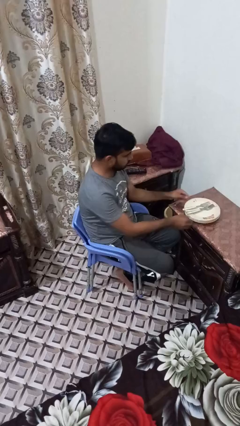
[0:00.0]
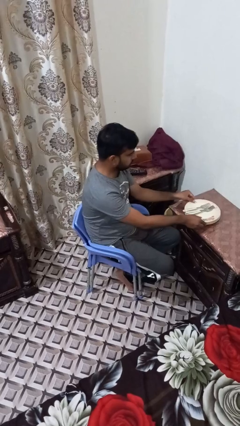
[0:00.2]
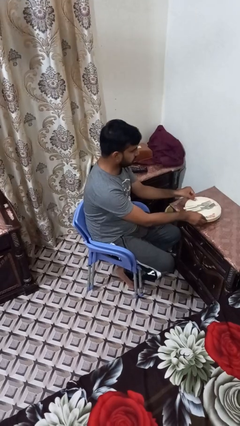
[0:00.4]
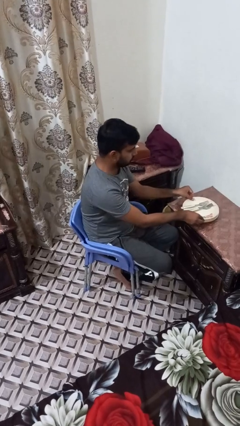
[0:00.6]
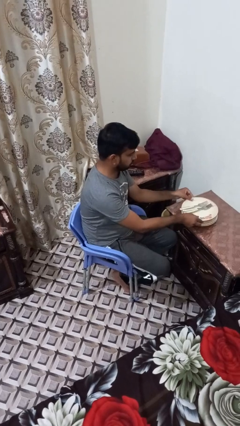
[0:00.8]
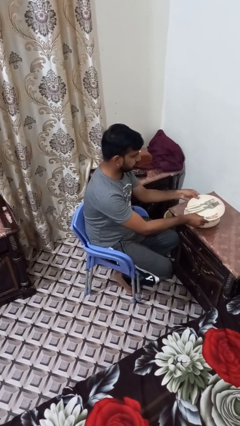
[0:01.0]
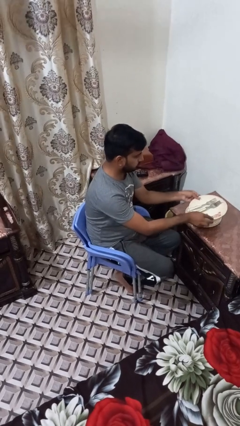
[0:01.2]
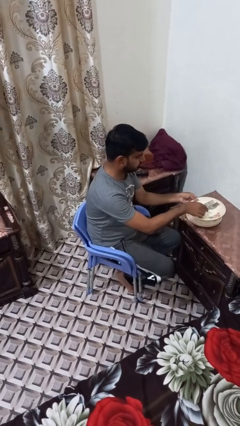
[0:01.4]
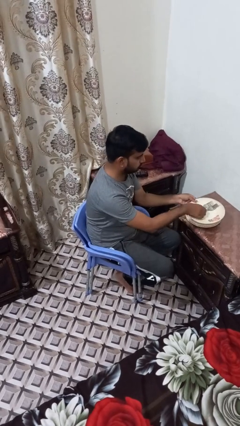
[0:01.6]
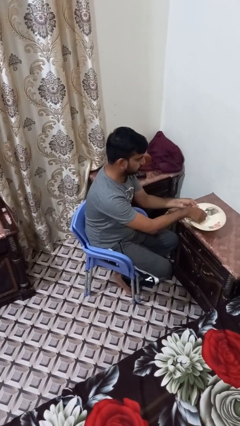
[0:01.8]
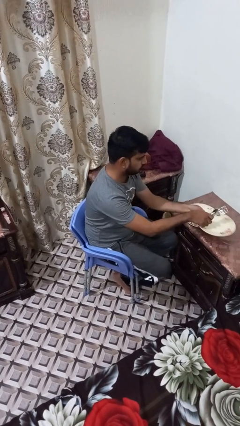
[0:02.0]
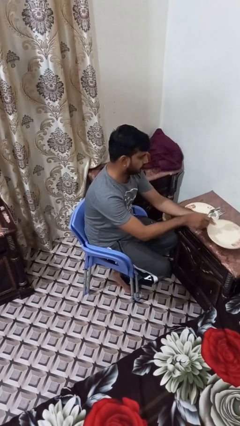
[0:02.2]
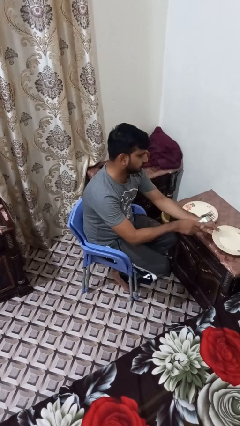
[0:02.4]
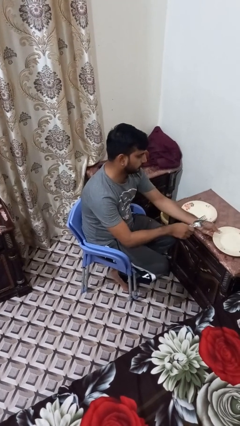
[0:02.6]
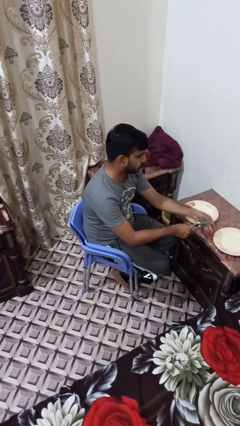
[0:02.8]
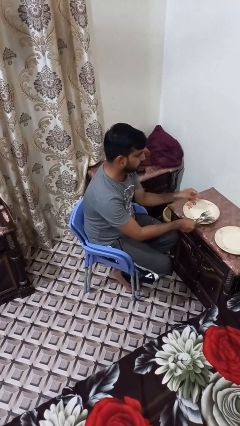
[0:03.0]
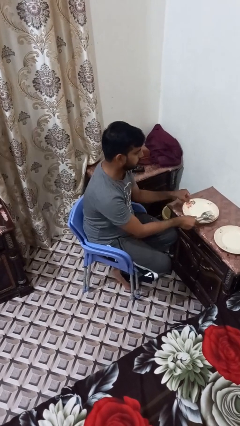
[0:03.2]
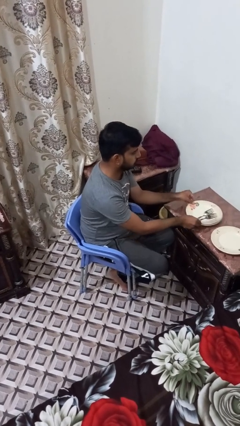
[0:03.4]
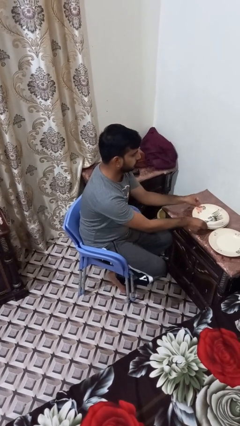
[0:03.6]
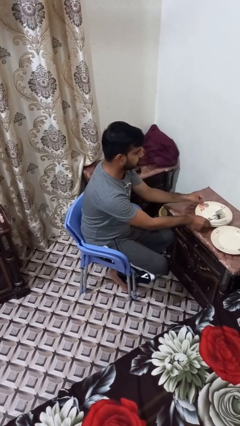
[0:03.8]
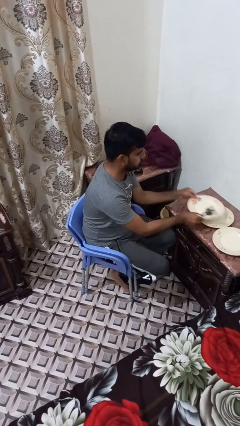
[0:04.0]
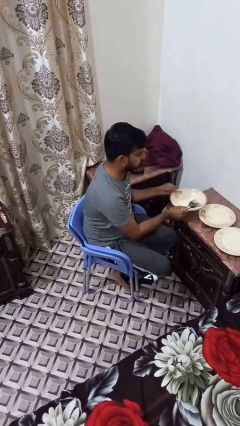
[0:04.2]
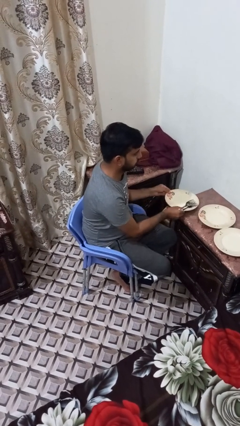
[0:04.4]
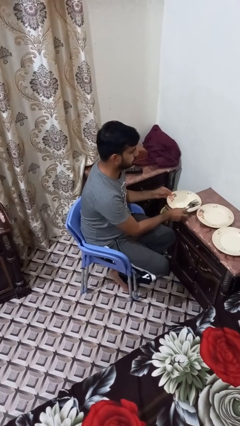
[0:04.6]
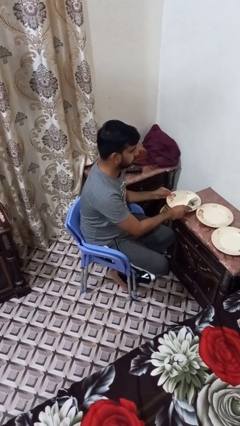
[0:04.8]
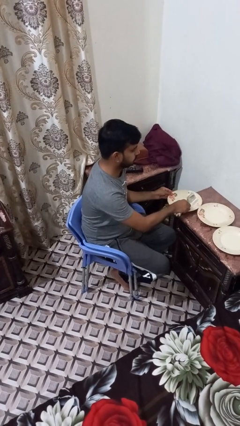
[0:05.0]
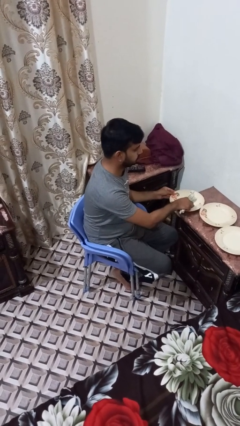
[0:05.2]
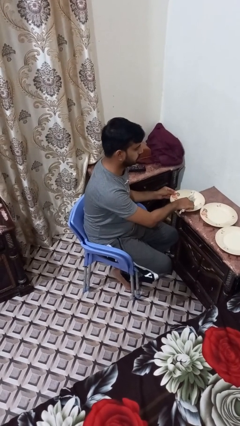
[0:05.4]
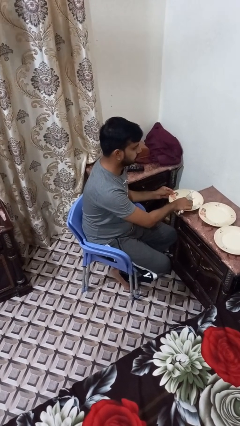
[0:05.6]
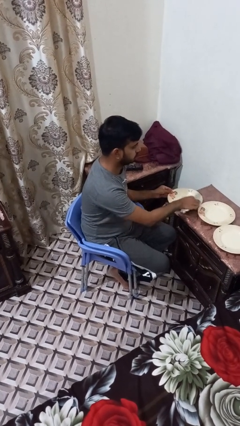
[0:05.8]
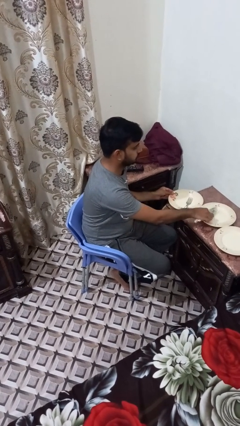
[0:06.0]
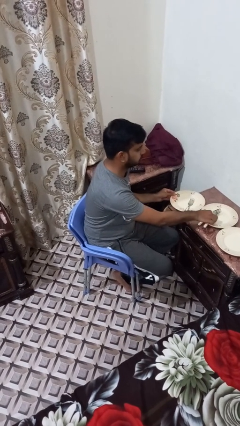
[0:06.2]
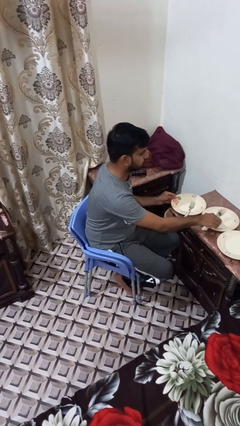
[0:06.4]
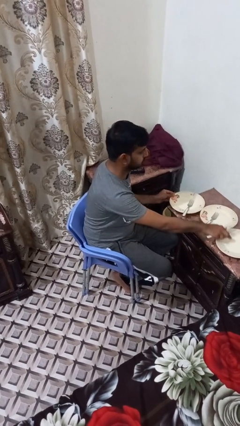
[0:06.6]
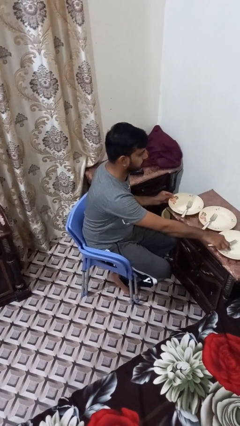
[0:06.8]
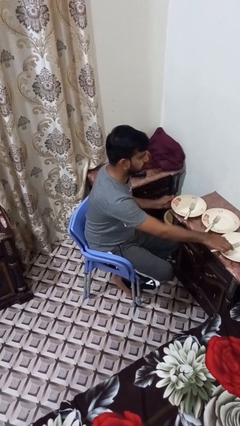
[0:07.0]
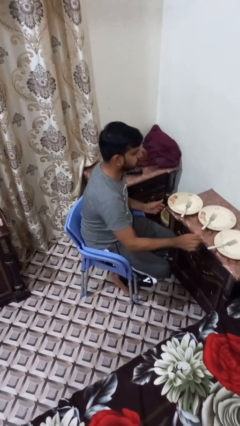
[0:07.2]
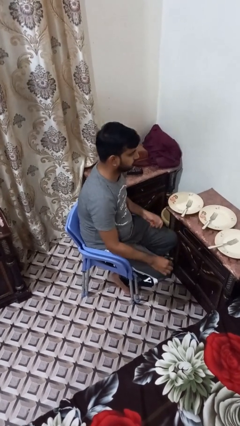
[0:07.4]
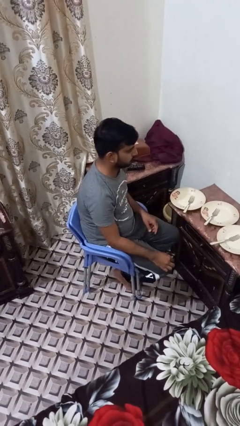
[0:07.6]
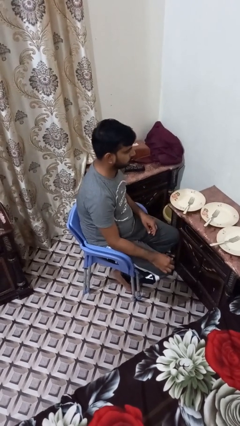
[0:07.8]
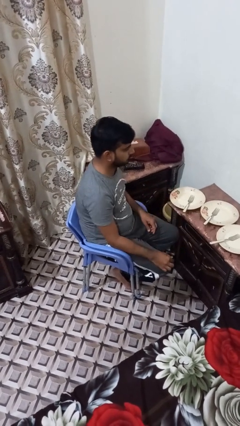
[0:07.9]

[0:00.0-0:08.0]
person sets table

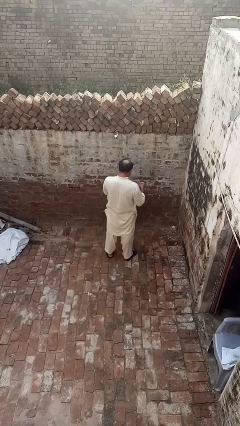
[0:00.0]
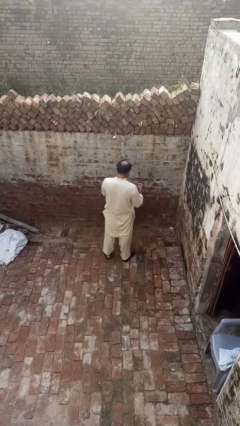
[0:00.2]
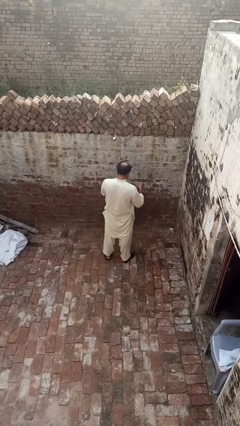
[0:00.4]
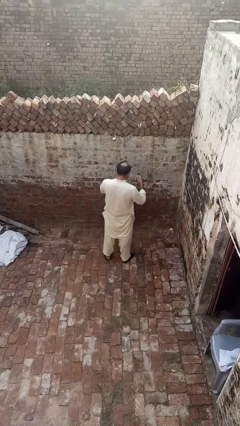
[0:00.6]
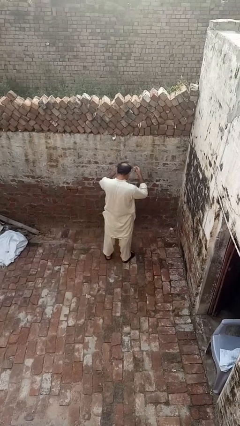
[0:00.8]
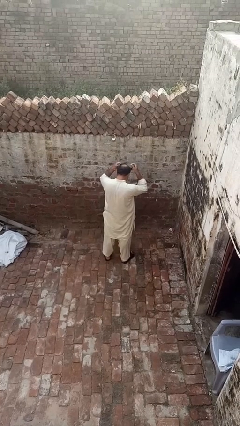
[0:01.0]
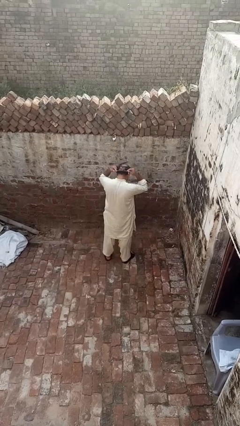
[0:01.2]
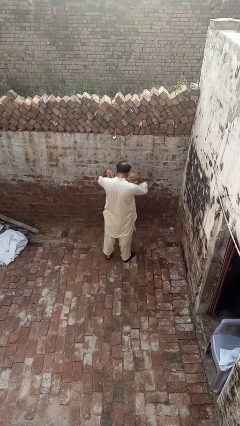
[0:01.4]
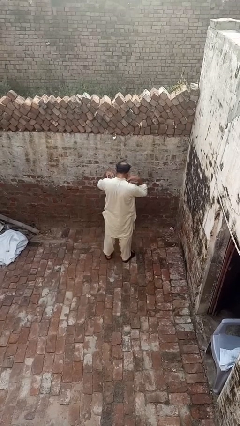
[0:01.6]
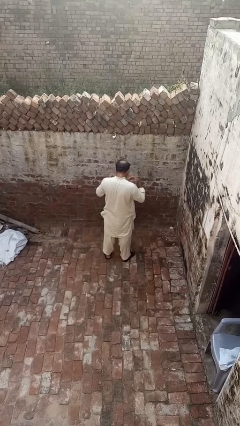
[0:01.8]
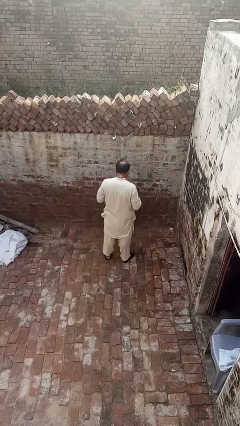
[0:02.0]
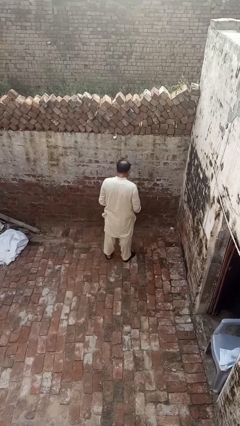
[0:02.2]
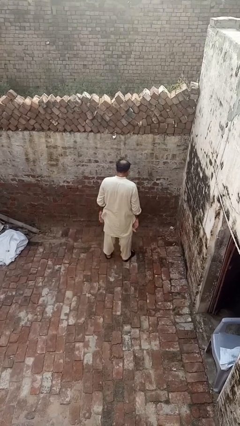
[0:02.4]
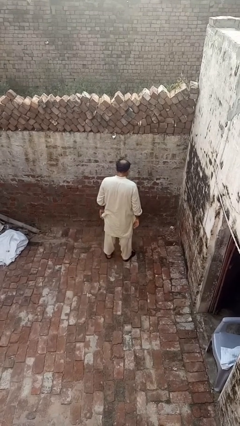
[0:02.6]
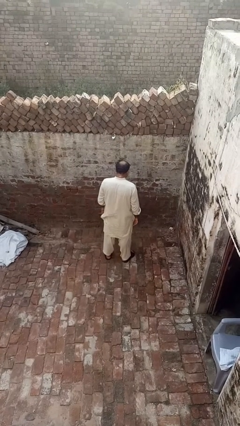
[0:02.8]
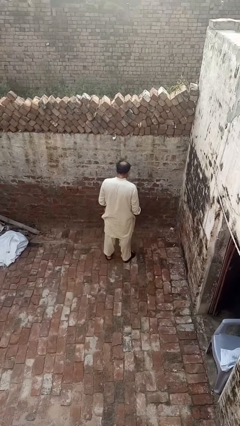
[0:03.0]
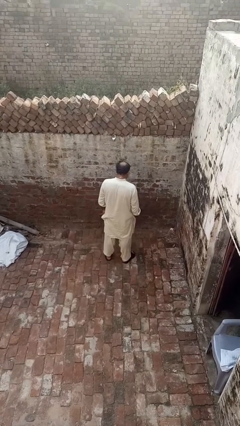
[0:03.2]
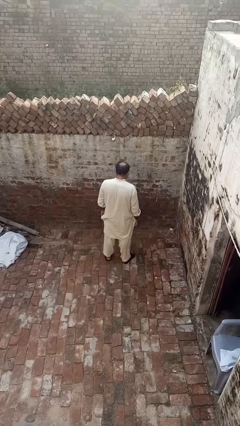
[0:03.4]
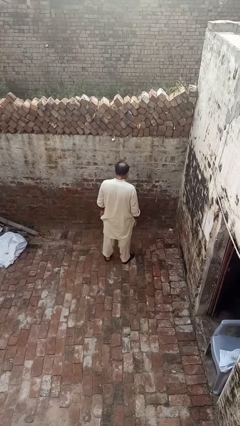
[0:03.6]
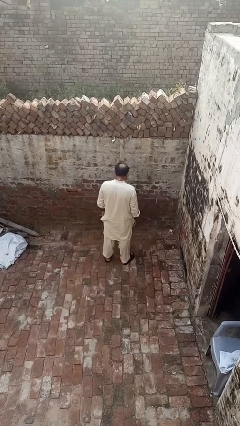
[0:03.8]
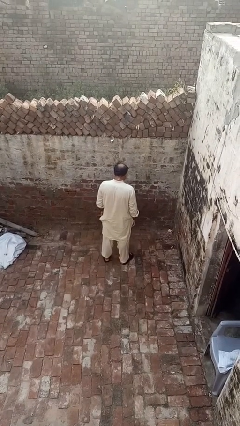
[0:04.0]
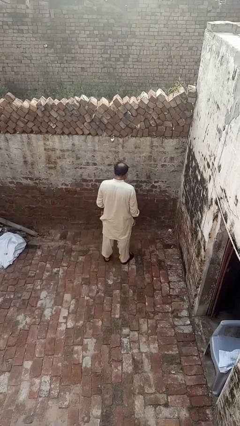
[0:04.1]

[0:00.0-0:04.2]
person puts on necklace

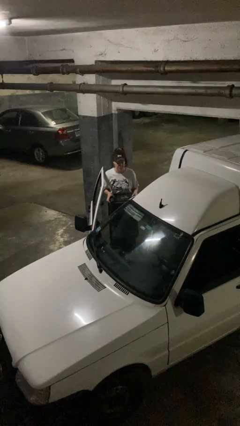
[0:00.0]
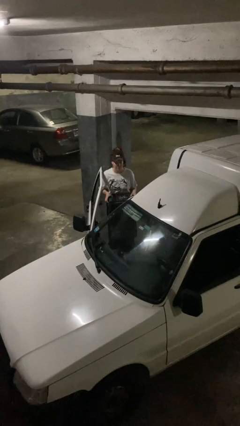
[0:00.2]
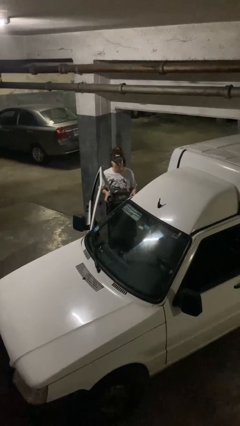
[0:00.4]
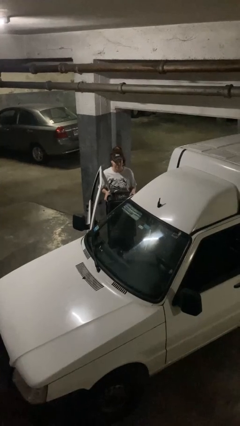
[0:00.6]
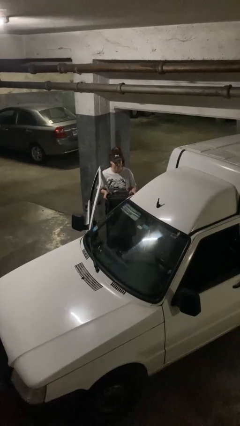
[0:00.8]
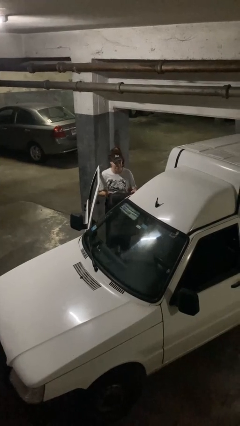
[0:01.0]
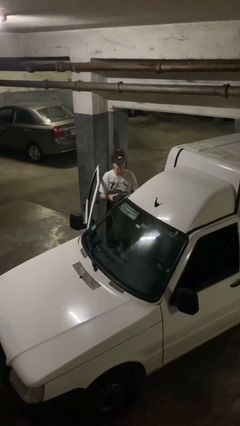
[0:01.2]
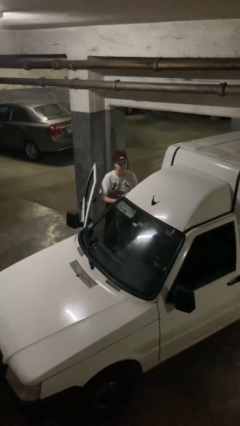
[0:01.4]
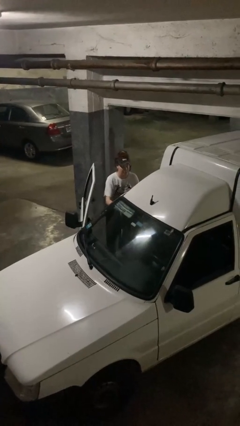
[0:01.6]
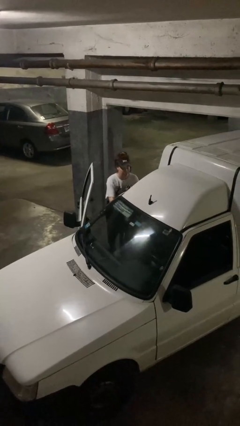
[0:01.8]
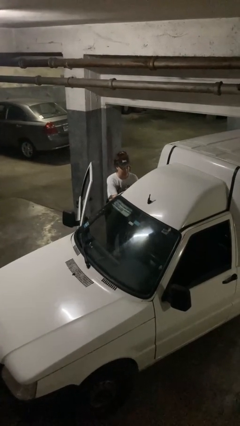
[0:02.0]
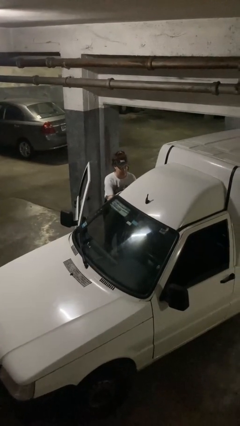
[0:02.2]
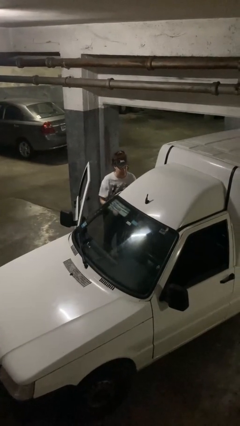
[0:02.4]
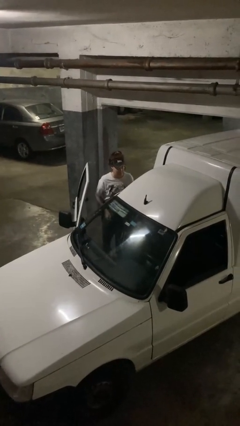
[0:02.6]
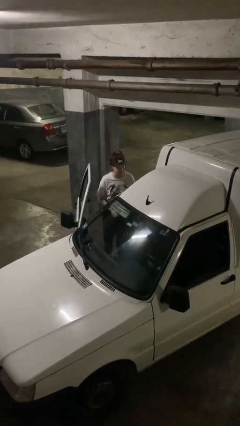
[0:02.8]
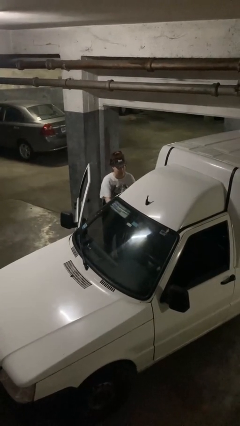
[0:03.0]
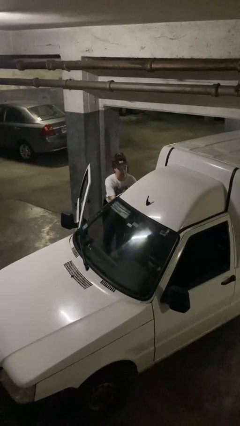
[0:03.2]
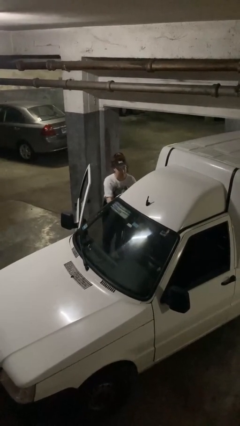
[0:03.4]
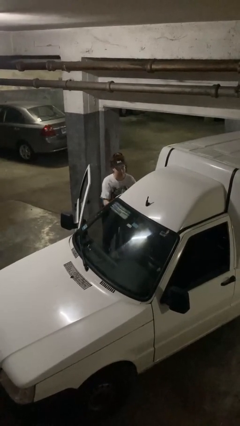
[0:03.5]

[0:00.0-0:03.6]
person loads car

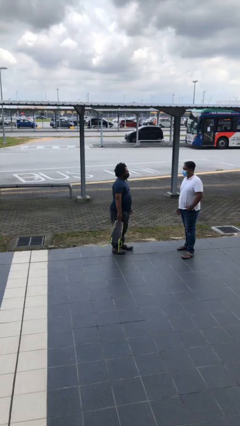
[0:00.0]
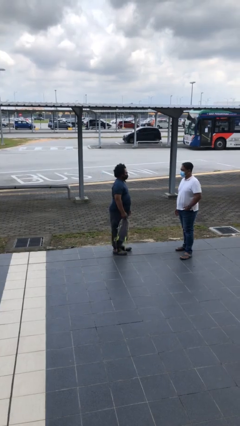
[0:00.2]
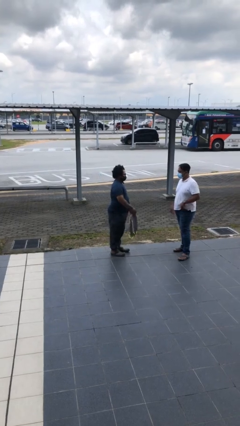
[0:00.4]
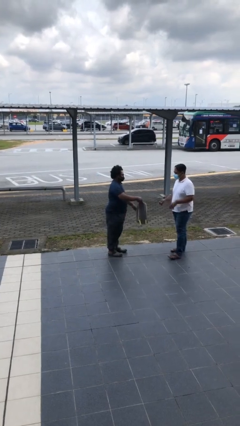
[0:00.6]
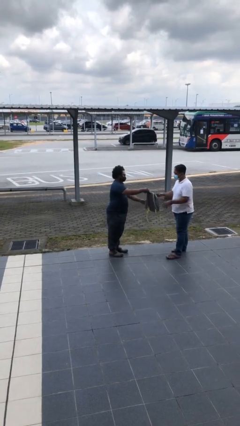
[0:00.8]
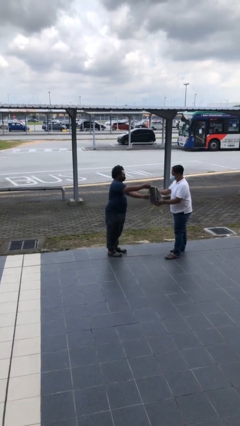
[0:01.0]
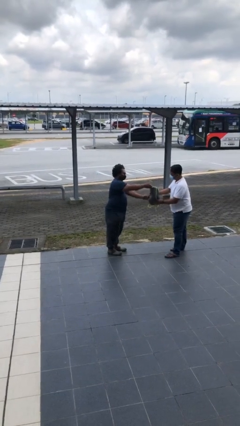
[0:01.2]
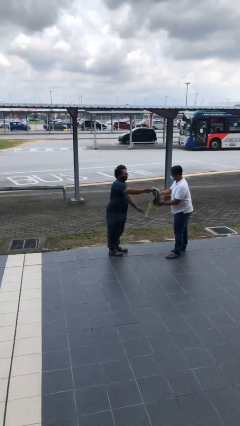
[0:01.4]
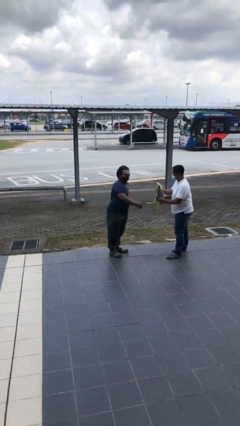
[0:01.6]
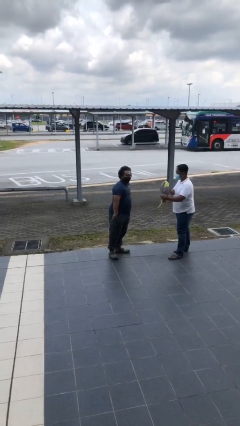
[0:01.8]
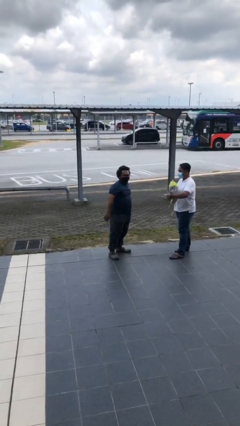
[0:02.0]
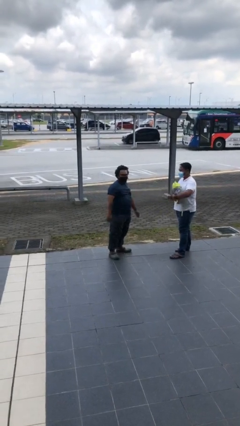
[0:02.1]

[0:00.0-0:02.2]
person transfers object to person
